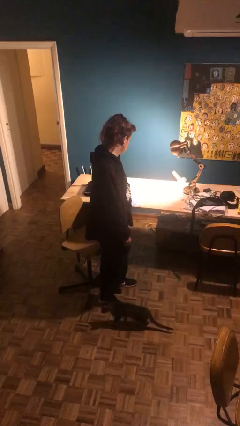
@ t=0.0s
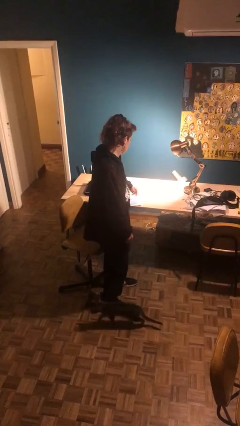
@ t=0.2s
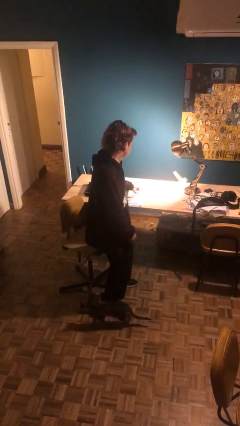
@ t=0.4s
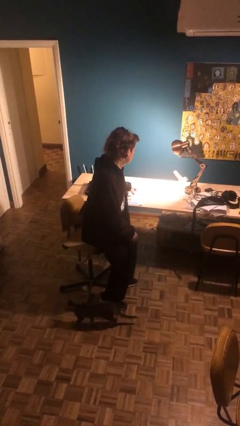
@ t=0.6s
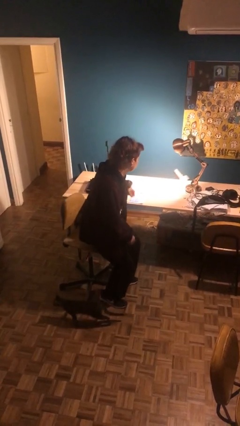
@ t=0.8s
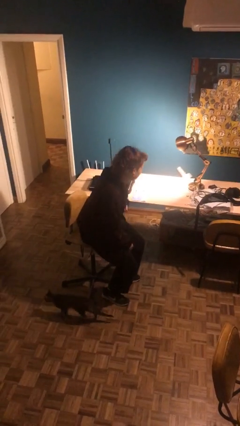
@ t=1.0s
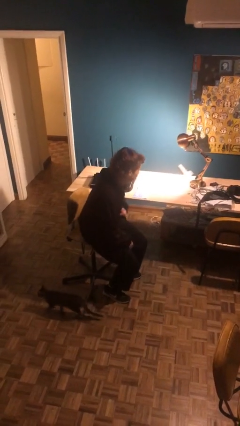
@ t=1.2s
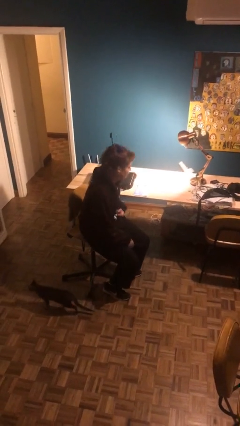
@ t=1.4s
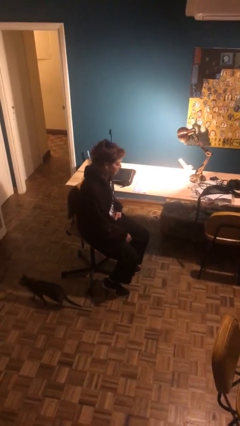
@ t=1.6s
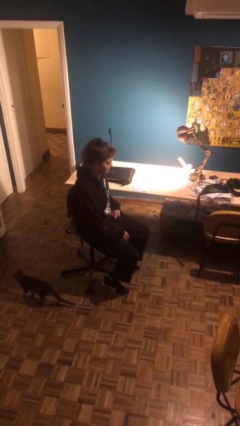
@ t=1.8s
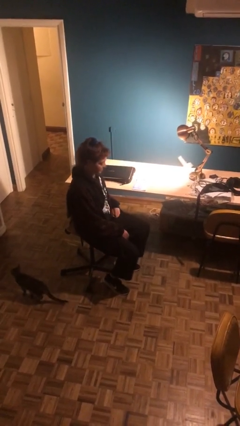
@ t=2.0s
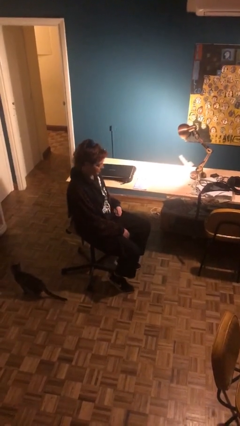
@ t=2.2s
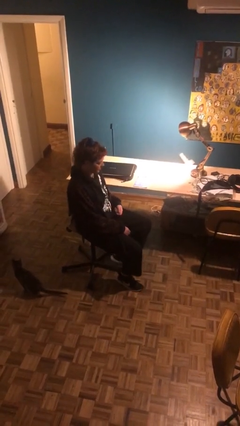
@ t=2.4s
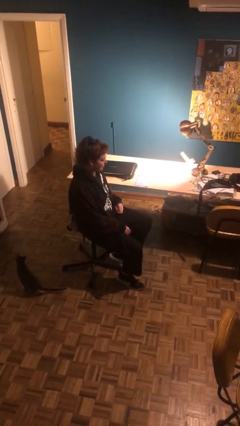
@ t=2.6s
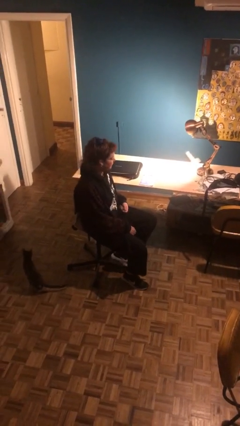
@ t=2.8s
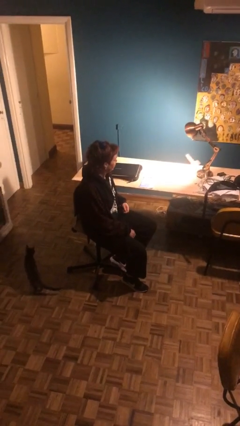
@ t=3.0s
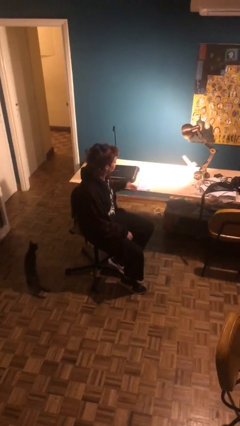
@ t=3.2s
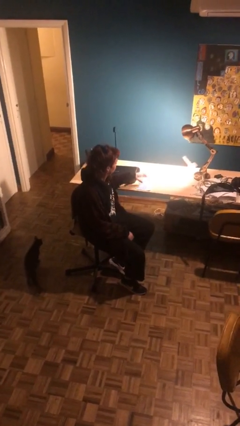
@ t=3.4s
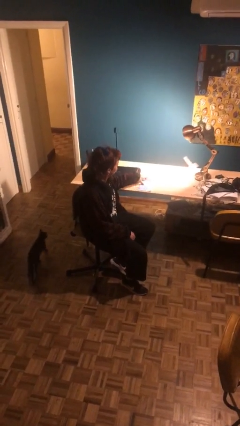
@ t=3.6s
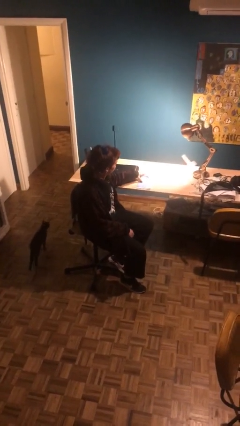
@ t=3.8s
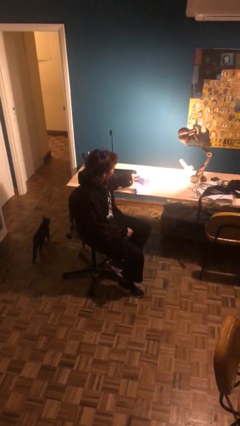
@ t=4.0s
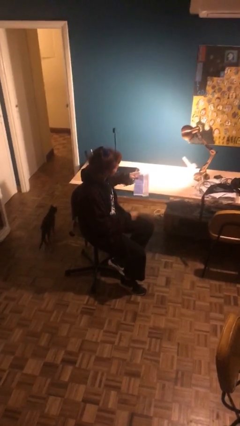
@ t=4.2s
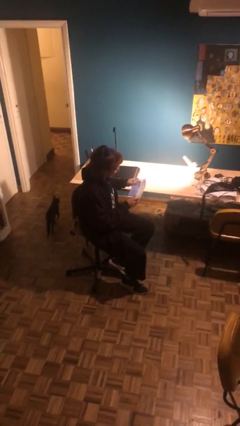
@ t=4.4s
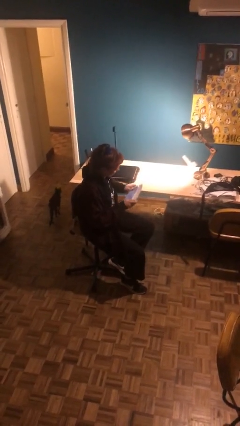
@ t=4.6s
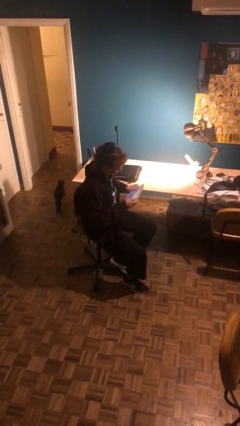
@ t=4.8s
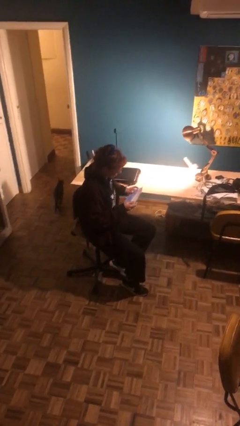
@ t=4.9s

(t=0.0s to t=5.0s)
person sits down

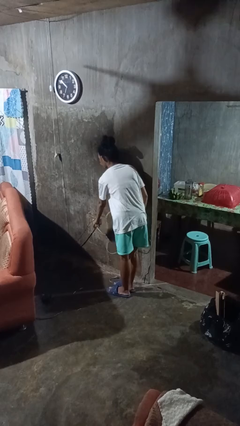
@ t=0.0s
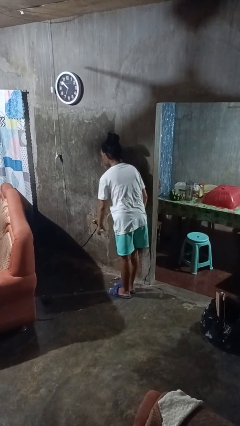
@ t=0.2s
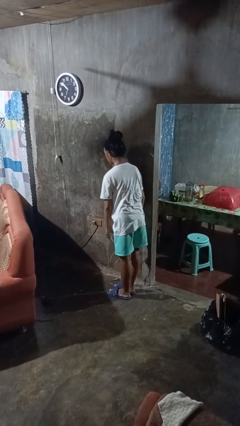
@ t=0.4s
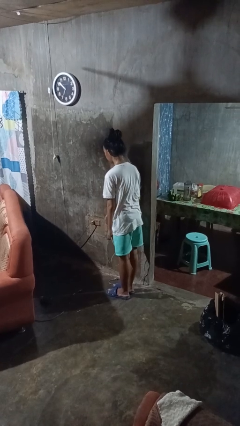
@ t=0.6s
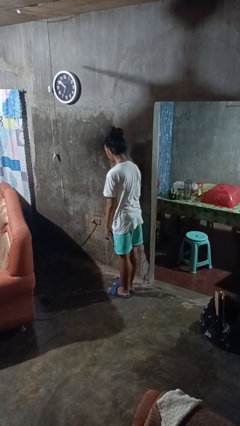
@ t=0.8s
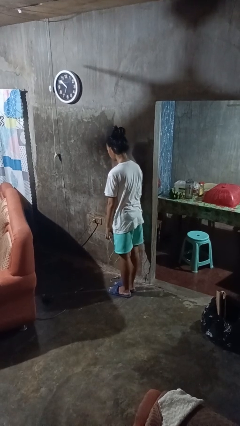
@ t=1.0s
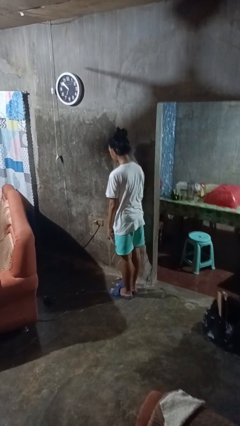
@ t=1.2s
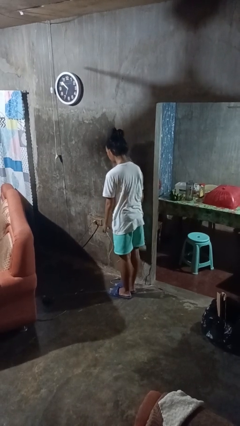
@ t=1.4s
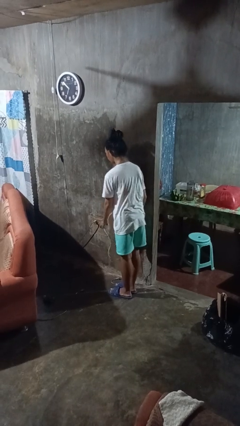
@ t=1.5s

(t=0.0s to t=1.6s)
person unplugs from electrical socket

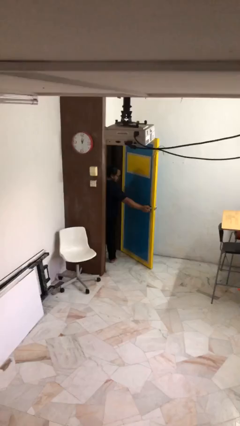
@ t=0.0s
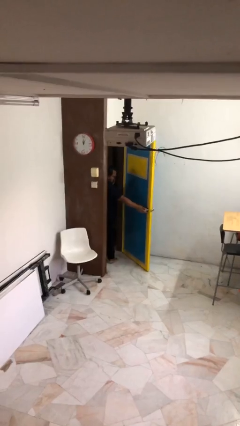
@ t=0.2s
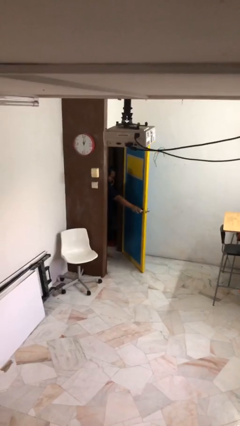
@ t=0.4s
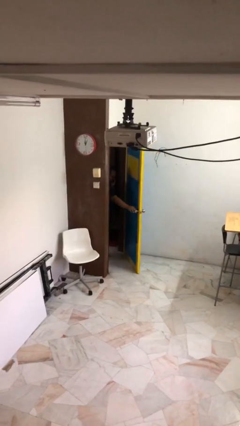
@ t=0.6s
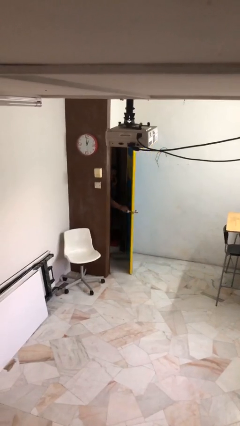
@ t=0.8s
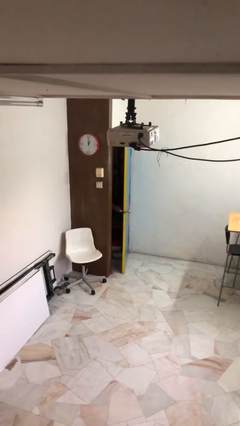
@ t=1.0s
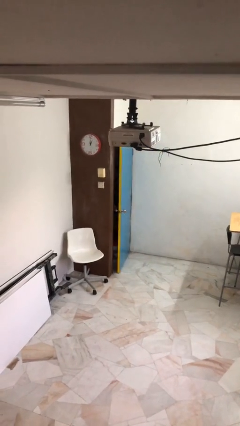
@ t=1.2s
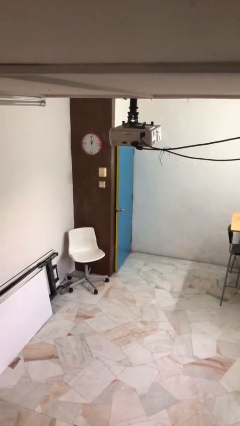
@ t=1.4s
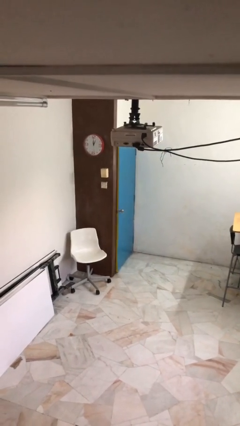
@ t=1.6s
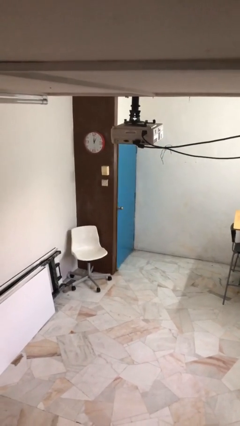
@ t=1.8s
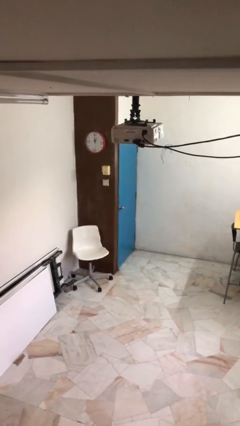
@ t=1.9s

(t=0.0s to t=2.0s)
person closes facility door

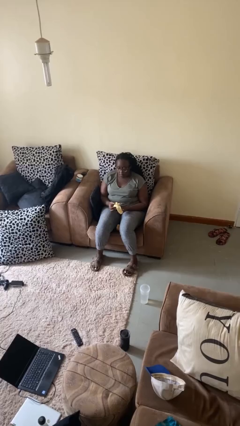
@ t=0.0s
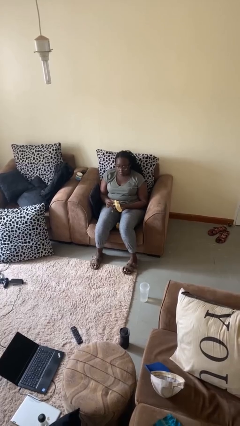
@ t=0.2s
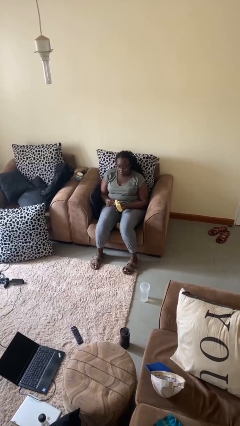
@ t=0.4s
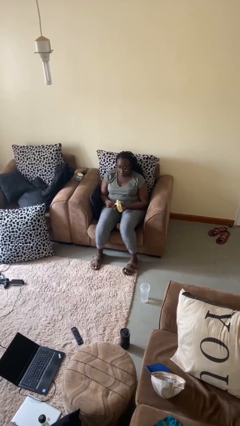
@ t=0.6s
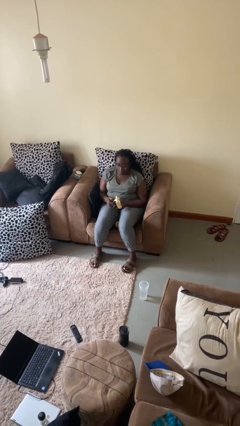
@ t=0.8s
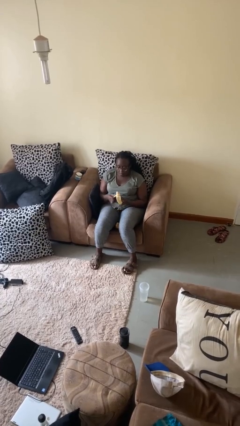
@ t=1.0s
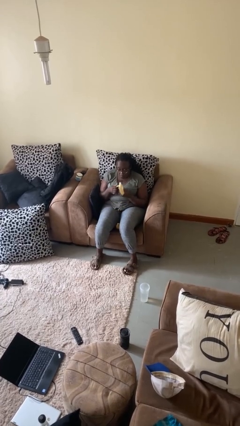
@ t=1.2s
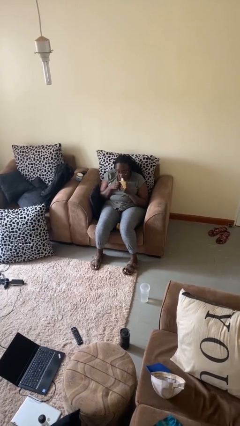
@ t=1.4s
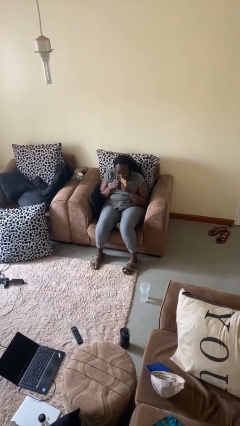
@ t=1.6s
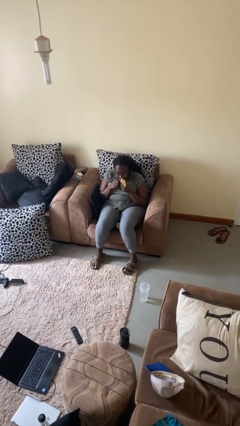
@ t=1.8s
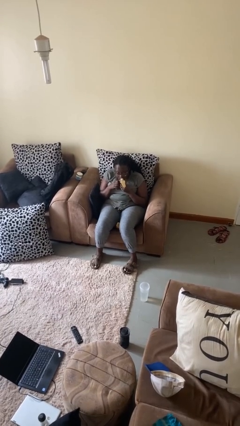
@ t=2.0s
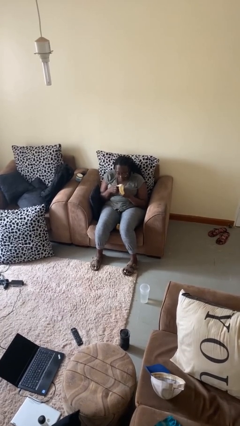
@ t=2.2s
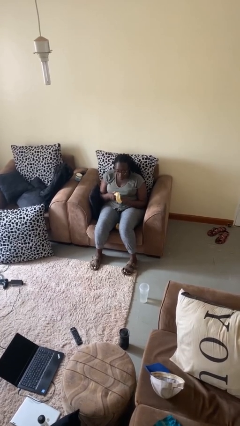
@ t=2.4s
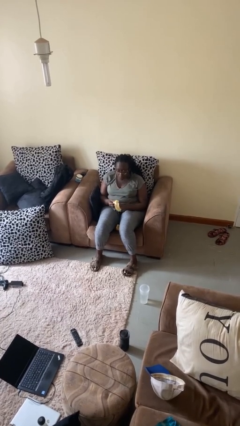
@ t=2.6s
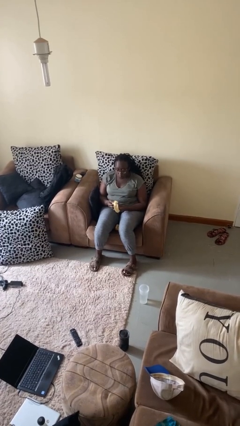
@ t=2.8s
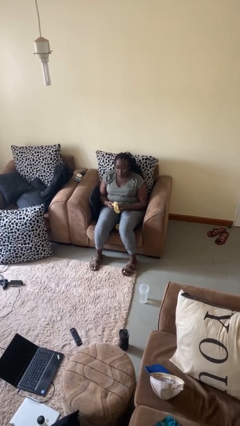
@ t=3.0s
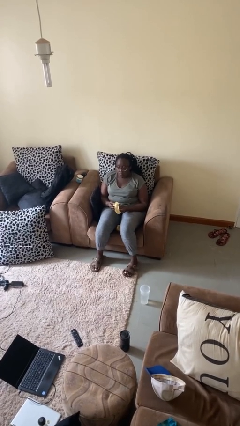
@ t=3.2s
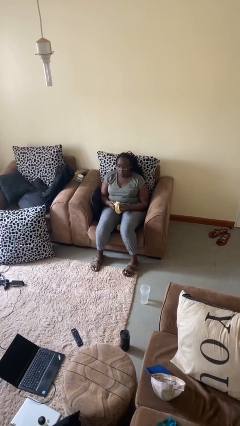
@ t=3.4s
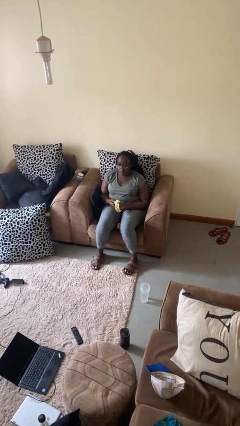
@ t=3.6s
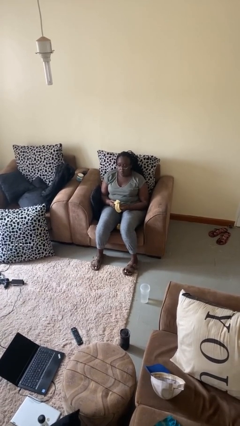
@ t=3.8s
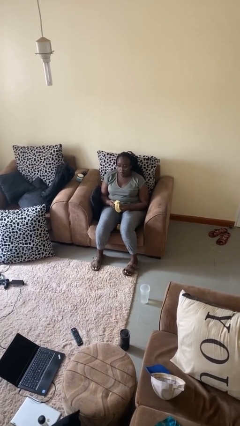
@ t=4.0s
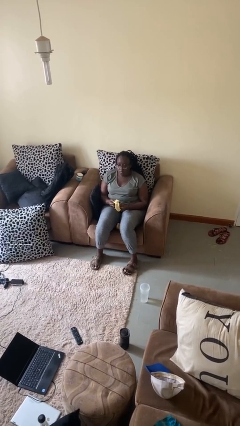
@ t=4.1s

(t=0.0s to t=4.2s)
person eats banana

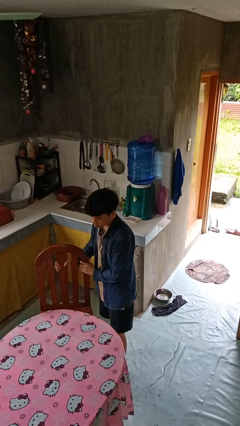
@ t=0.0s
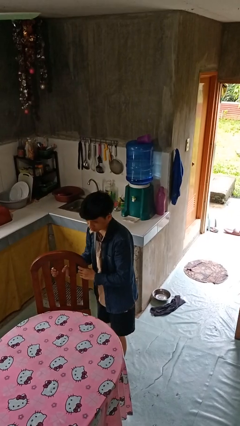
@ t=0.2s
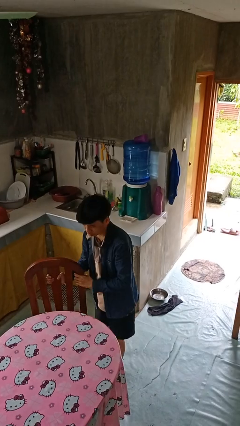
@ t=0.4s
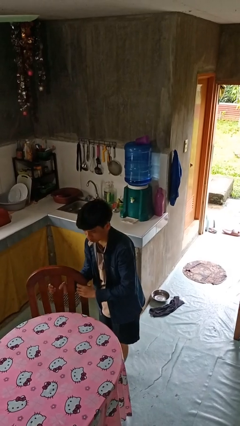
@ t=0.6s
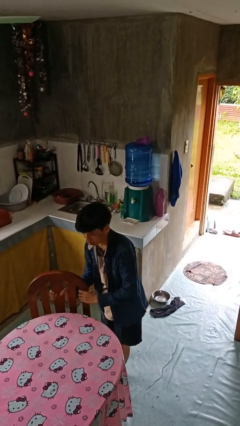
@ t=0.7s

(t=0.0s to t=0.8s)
person pushes in chair

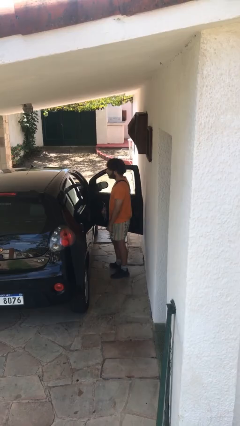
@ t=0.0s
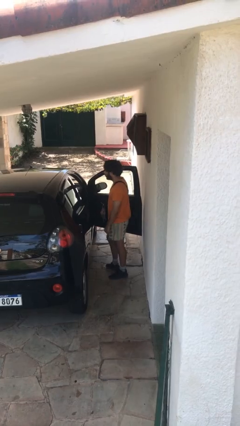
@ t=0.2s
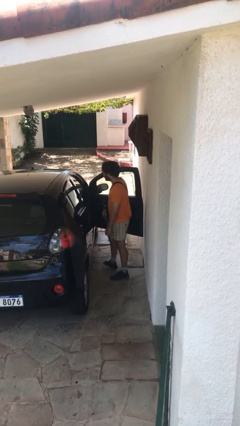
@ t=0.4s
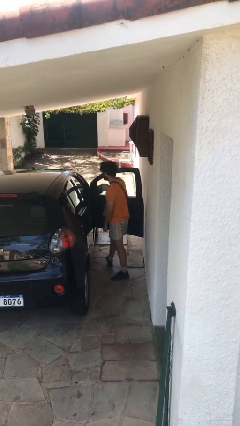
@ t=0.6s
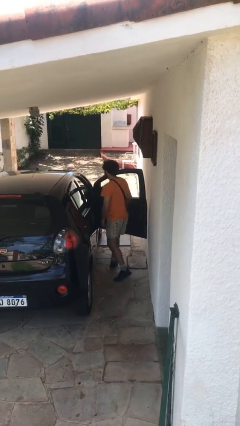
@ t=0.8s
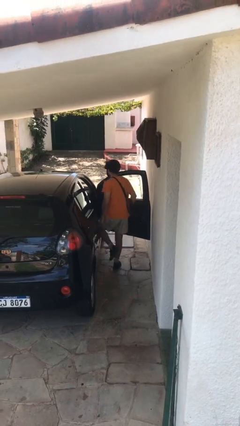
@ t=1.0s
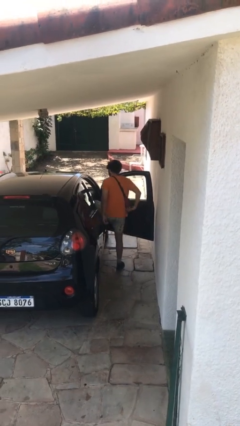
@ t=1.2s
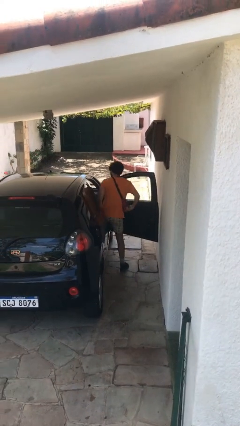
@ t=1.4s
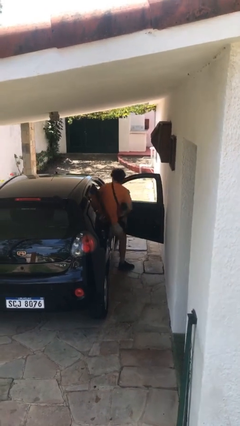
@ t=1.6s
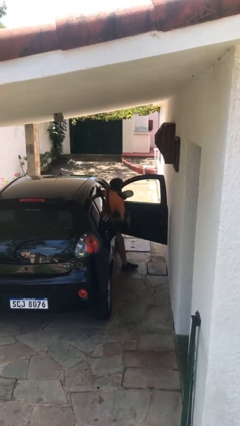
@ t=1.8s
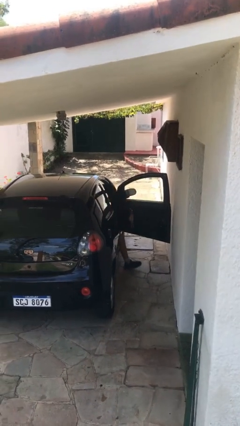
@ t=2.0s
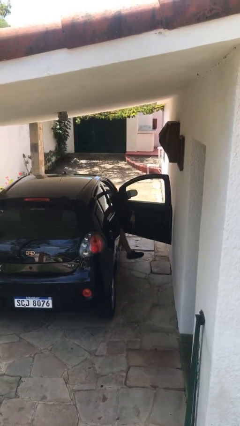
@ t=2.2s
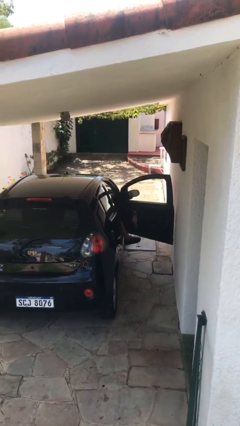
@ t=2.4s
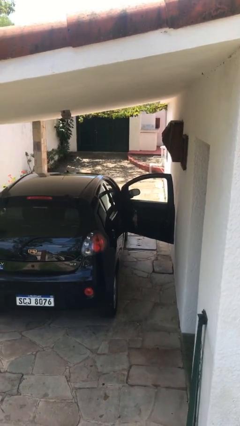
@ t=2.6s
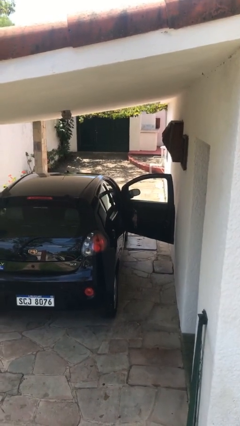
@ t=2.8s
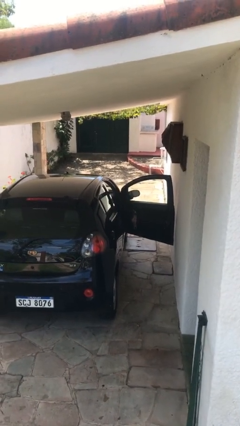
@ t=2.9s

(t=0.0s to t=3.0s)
person enters car

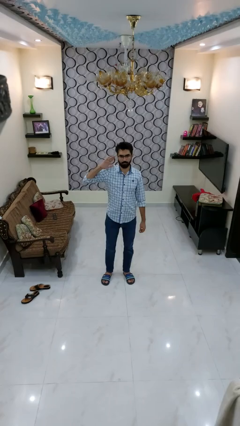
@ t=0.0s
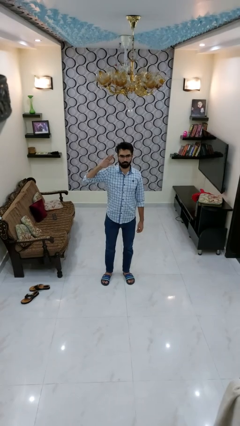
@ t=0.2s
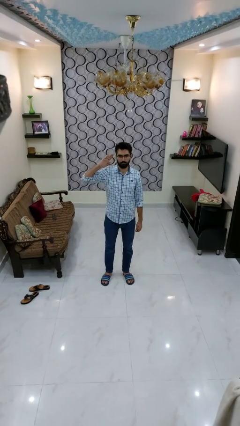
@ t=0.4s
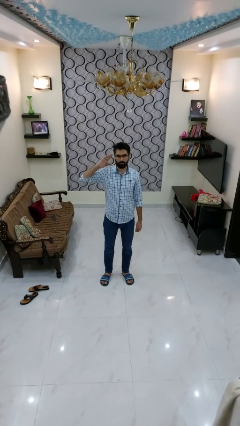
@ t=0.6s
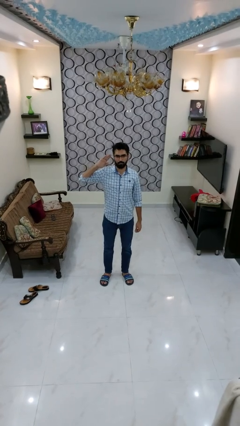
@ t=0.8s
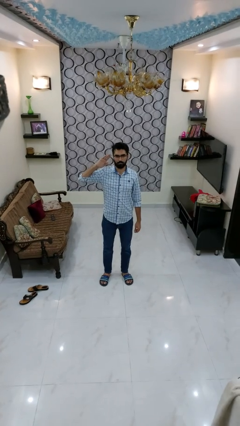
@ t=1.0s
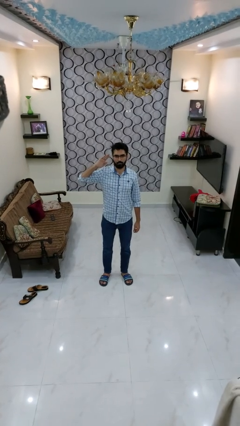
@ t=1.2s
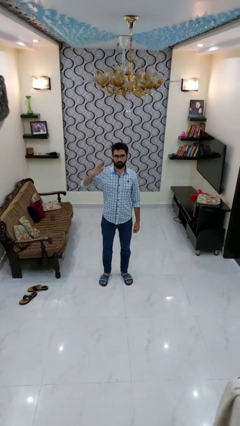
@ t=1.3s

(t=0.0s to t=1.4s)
person salutes
